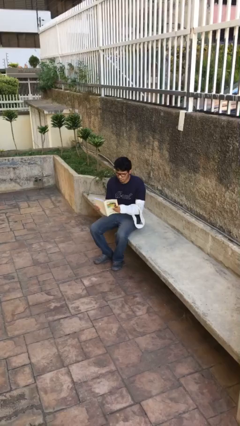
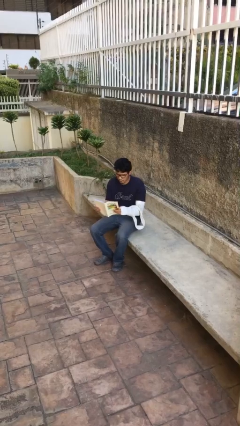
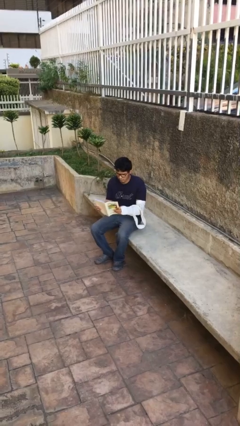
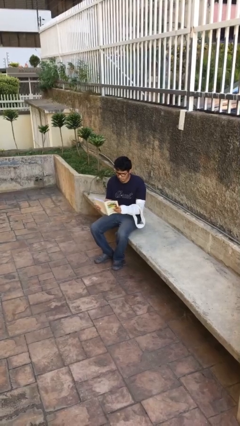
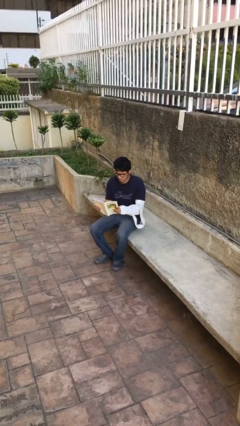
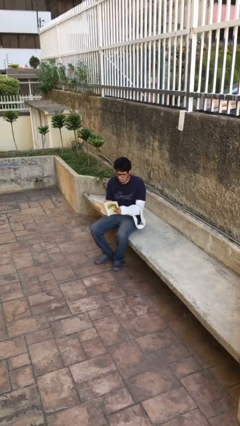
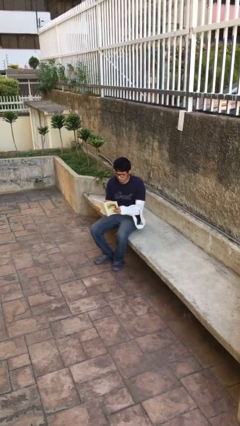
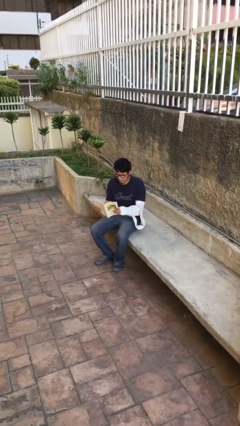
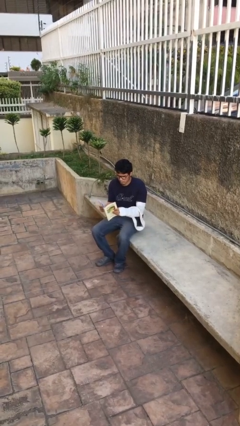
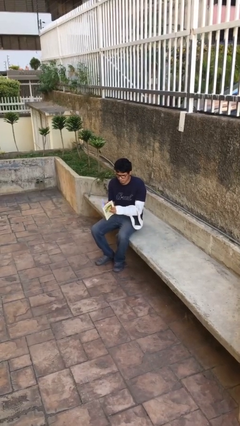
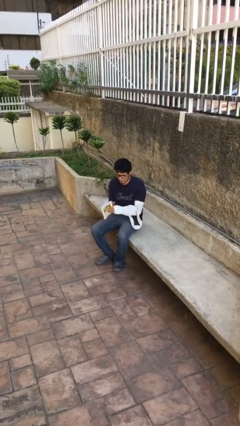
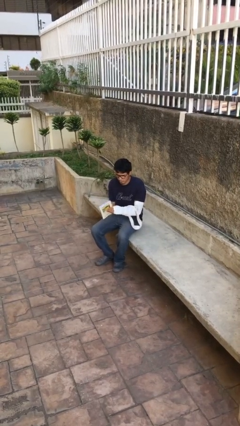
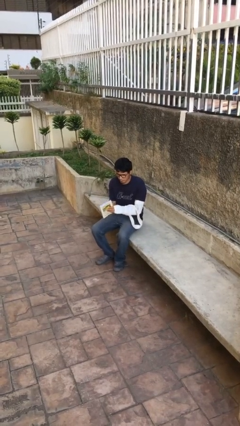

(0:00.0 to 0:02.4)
person reads document

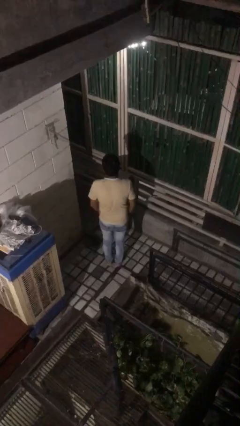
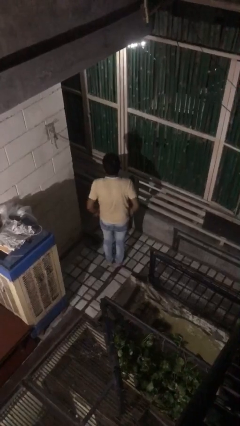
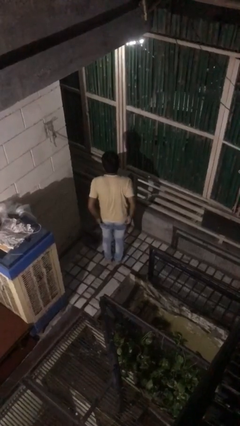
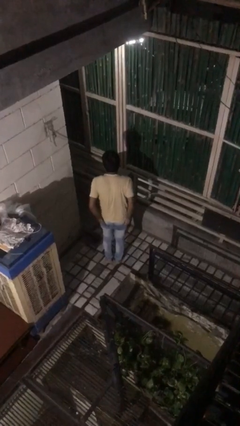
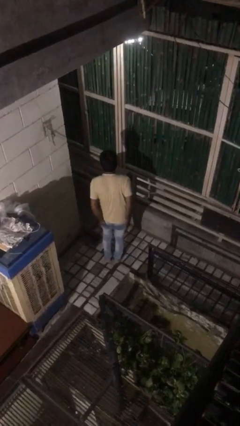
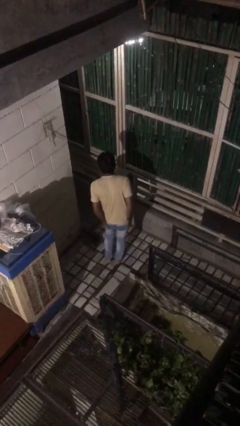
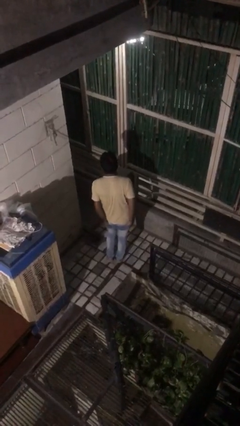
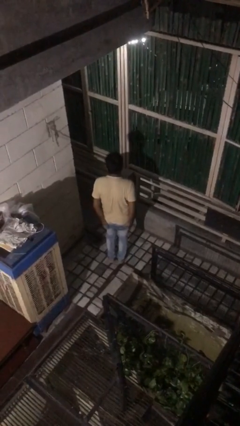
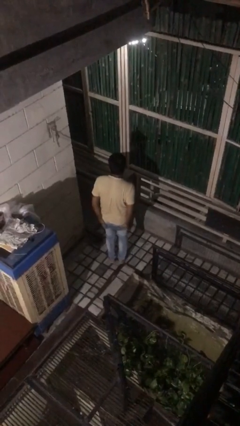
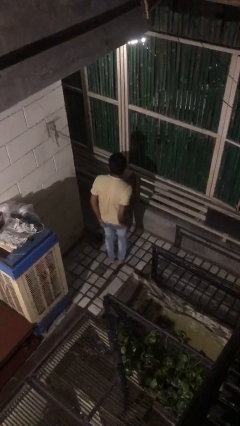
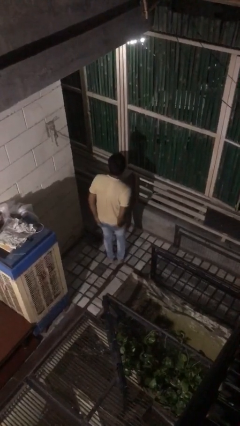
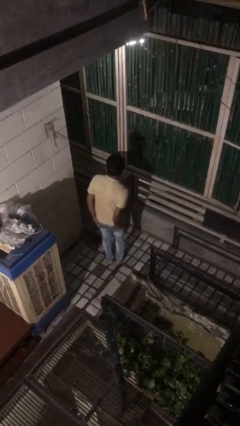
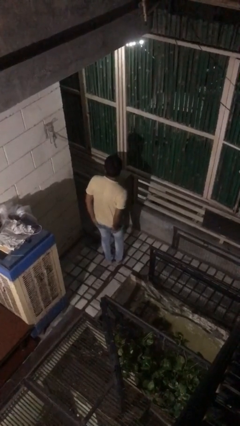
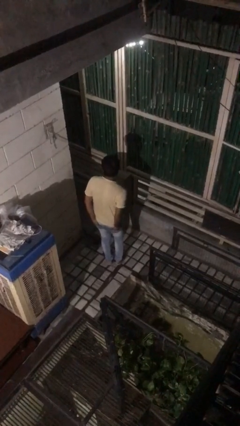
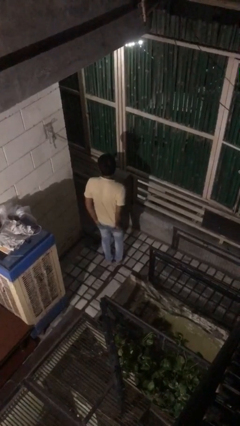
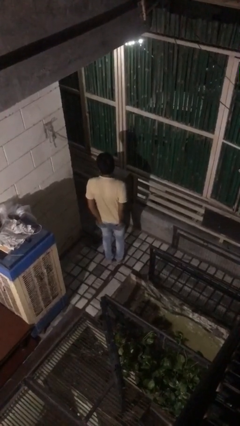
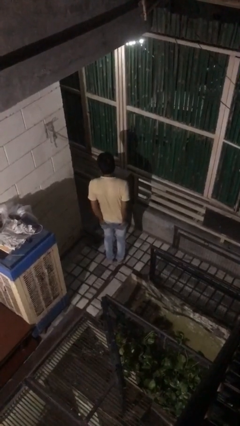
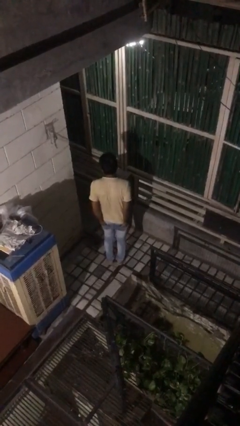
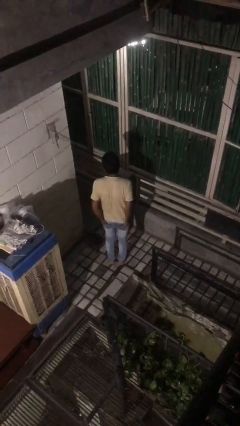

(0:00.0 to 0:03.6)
person puts hands in back pockets

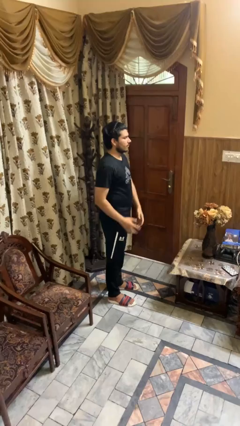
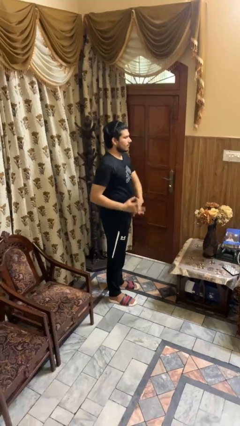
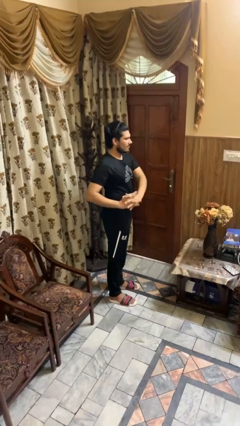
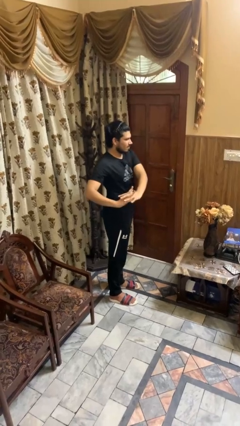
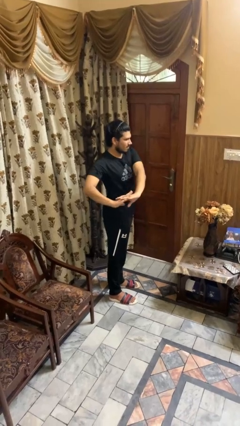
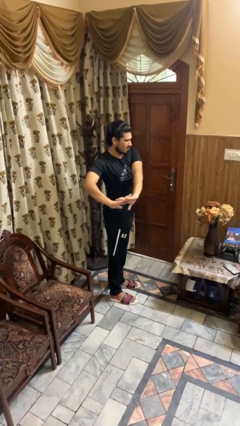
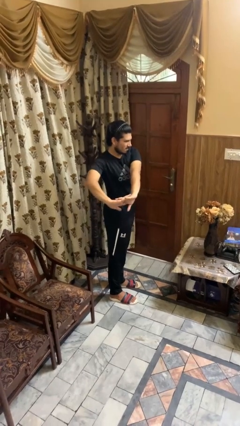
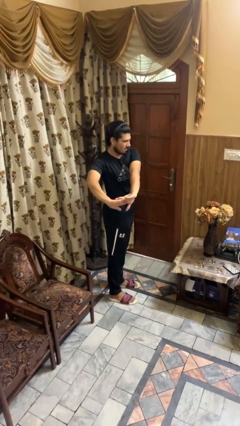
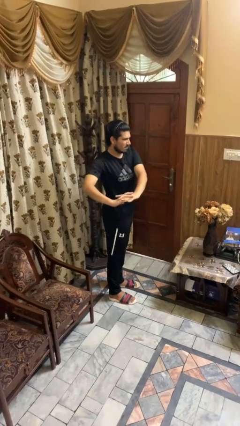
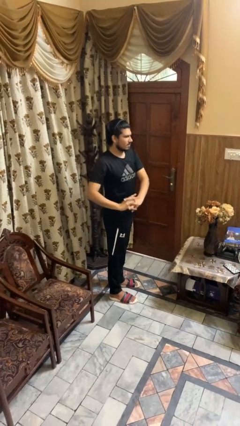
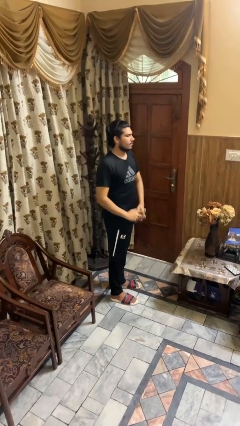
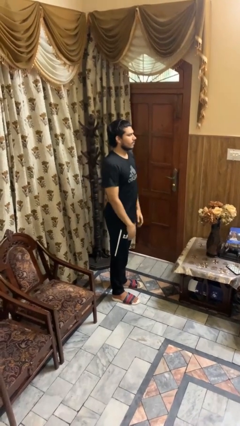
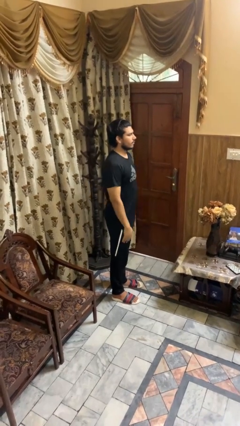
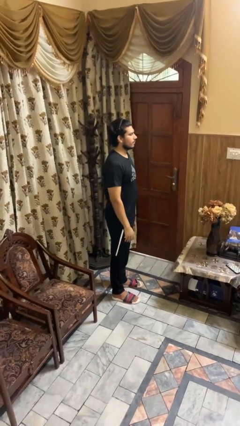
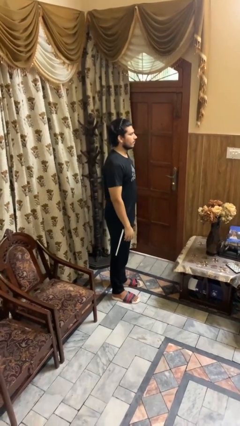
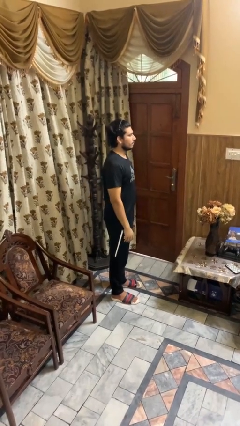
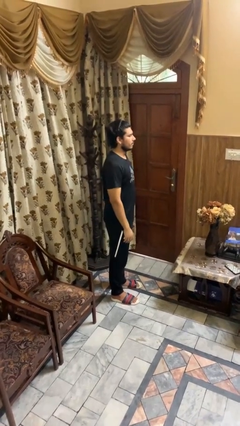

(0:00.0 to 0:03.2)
person stretches arms to side

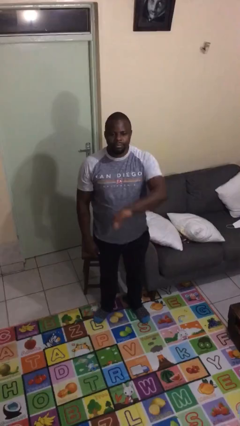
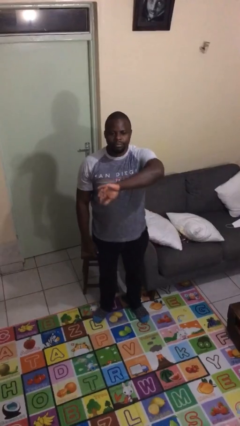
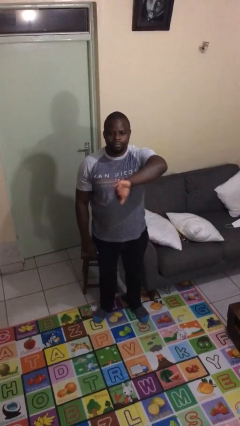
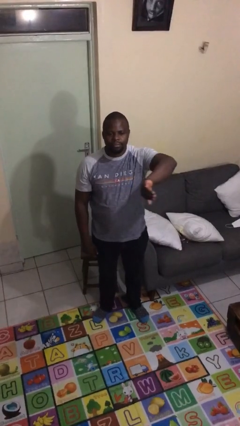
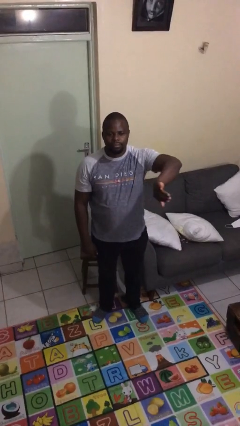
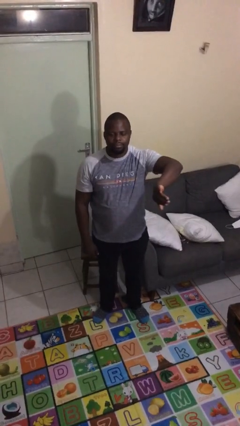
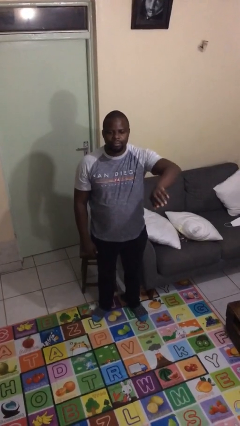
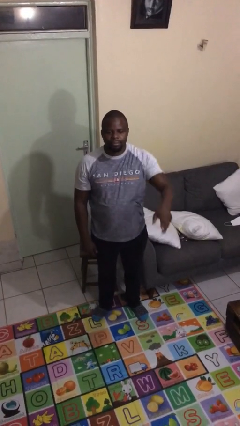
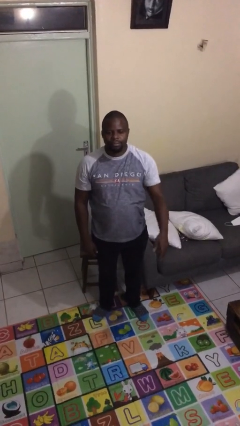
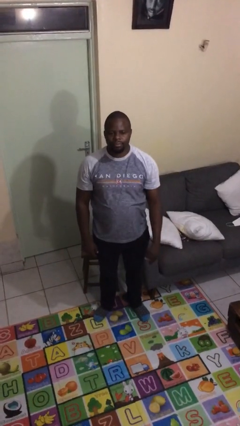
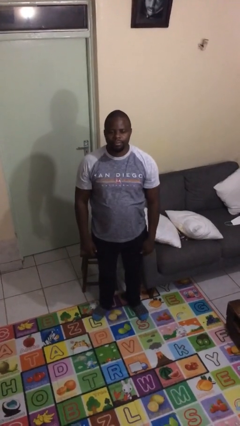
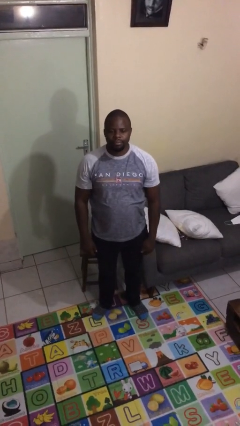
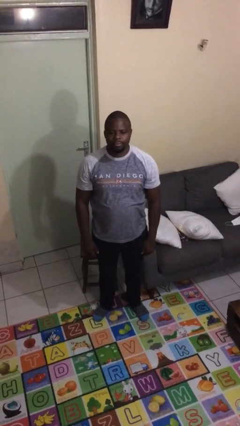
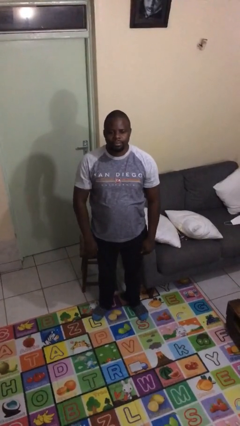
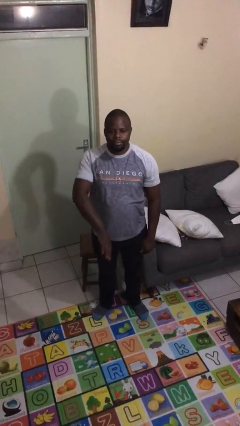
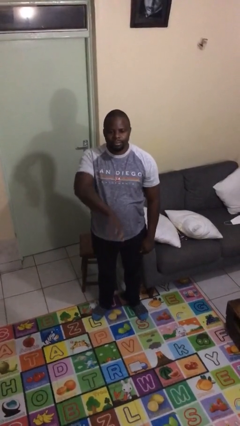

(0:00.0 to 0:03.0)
person gestures swipe left

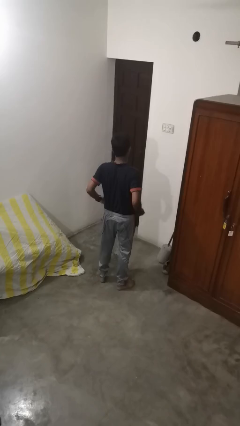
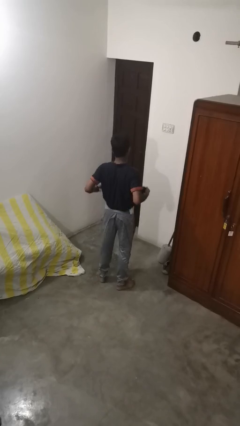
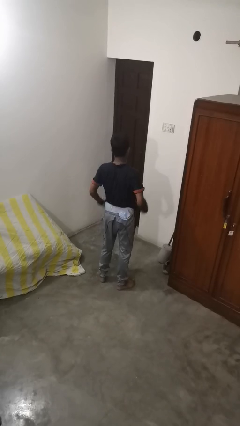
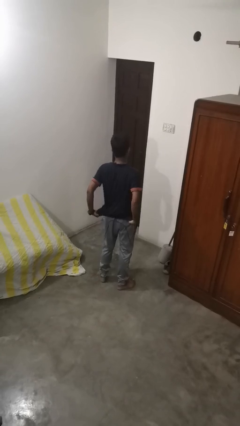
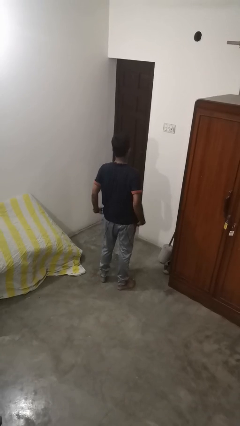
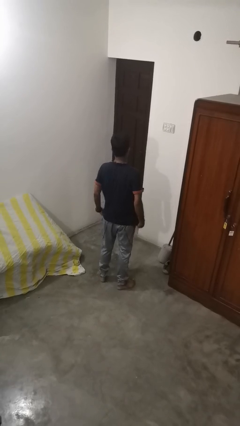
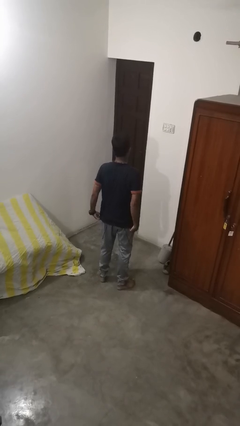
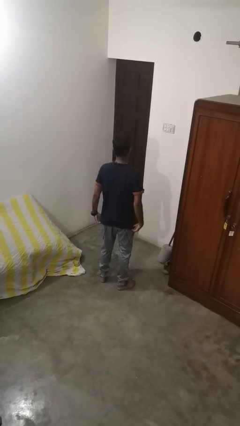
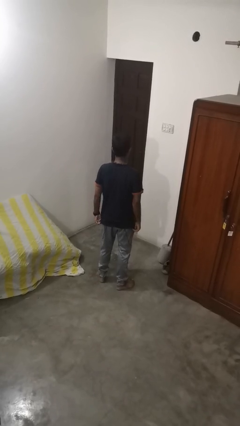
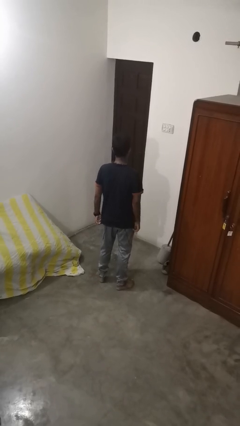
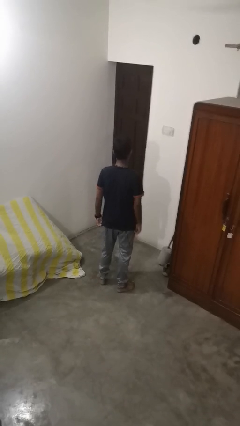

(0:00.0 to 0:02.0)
person untucks shirt

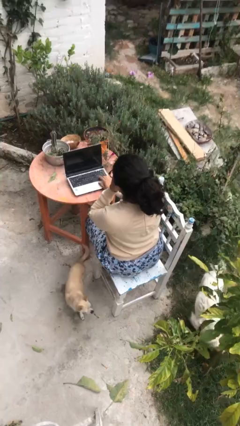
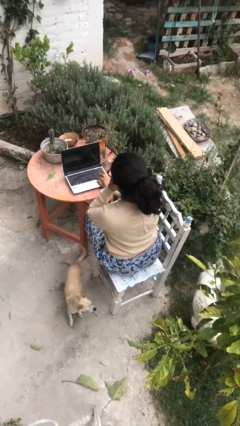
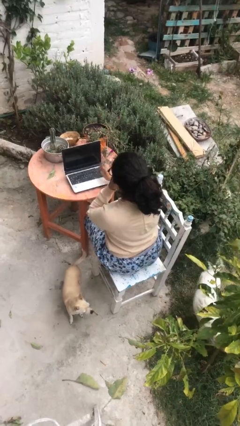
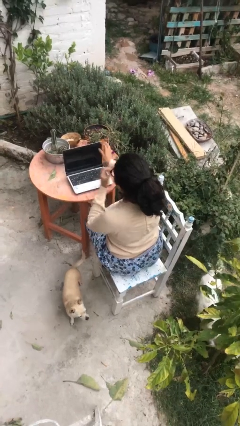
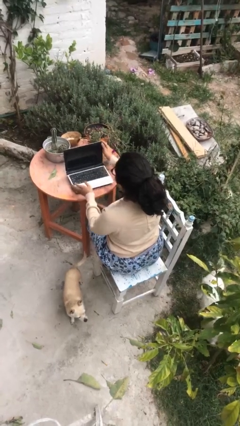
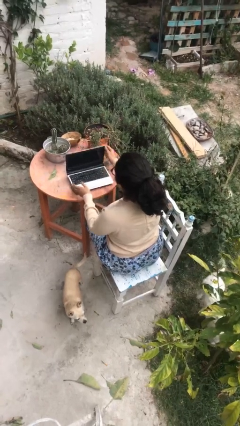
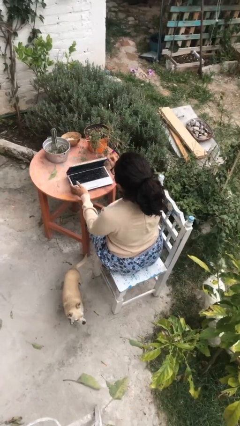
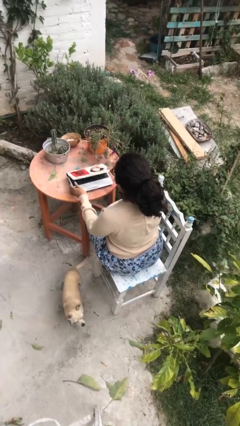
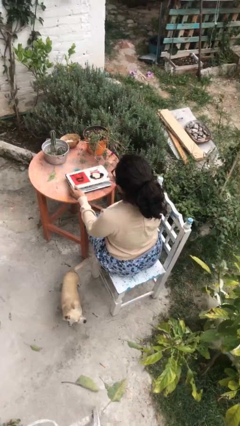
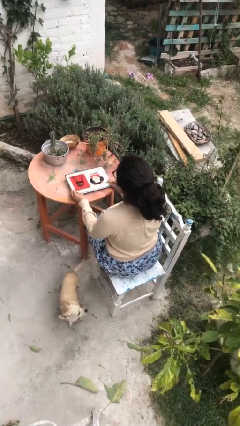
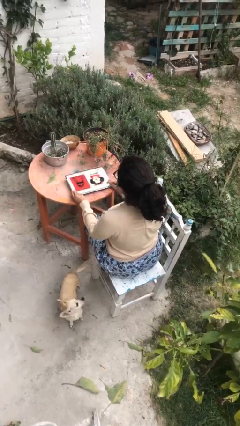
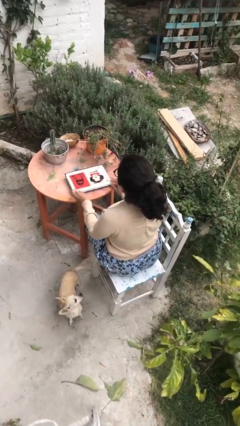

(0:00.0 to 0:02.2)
person closes laptop

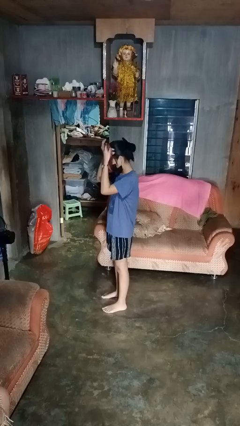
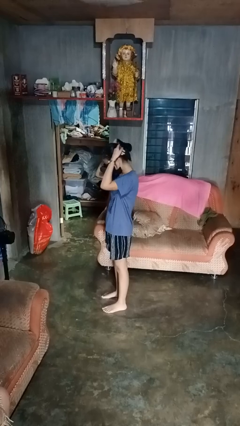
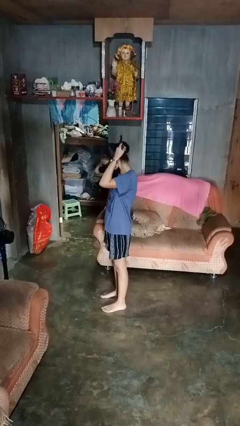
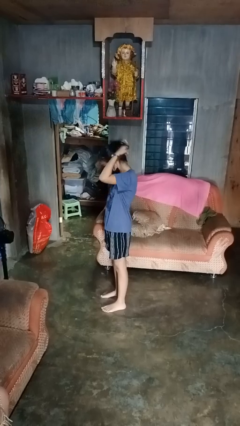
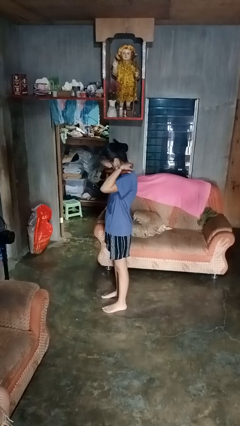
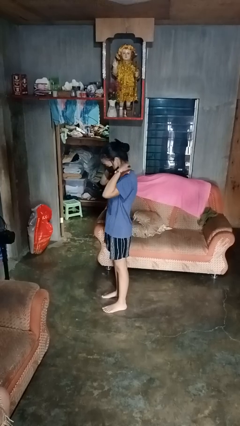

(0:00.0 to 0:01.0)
person puts on necklace
